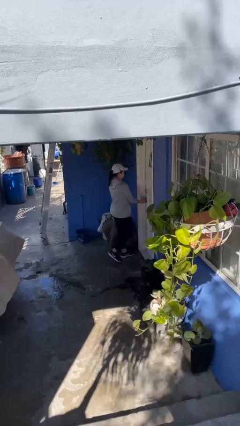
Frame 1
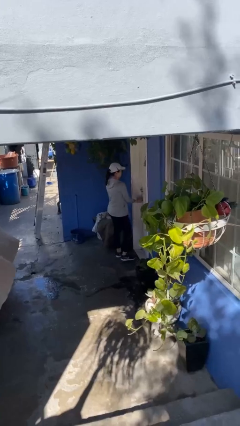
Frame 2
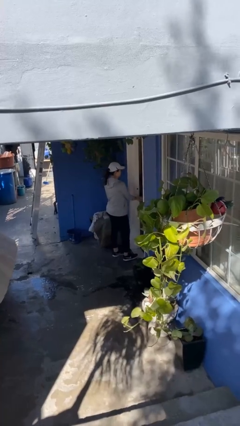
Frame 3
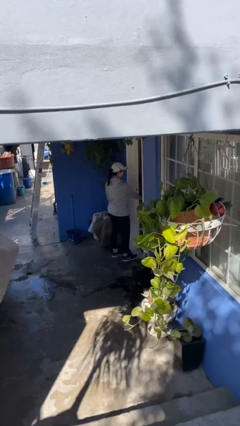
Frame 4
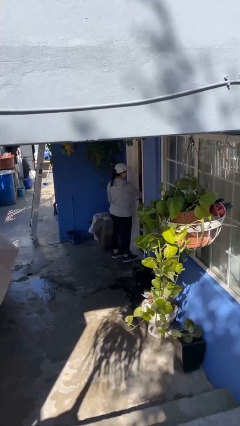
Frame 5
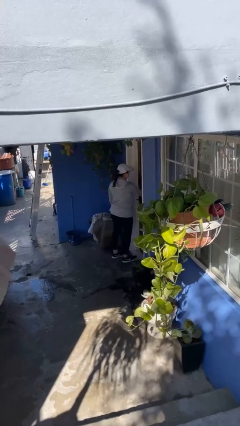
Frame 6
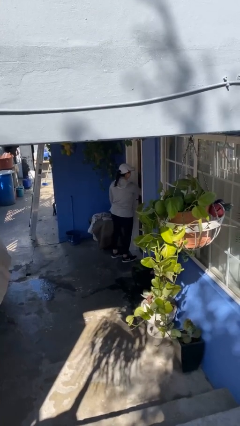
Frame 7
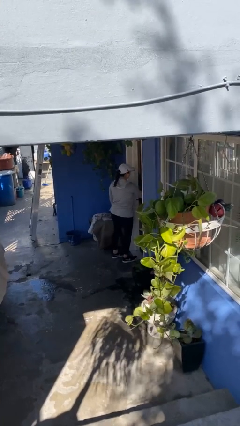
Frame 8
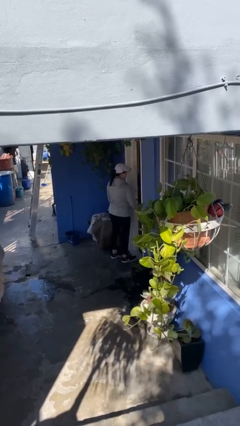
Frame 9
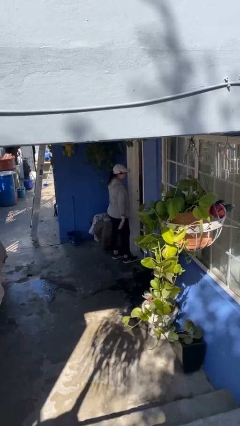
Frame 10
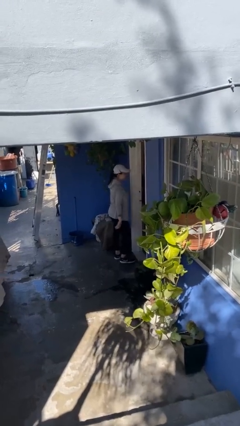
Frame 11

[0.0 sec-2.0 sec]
person opens facility door

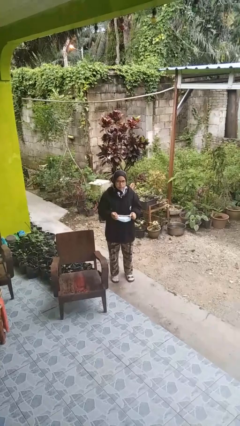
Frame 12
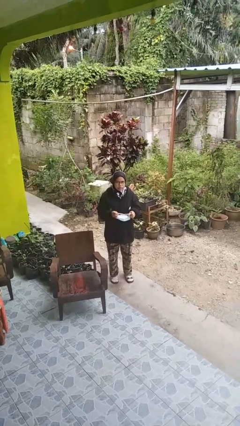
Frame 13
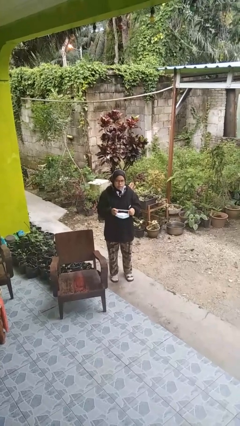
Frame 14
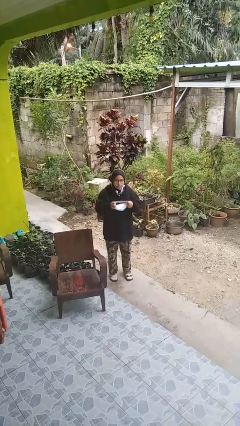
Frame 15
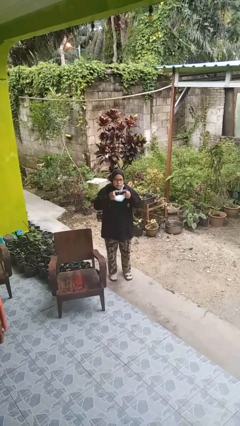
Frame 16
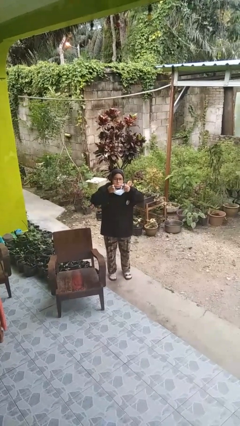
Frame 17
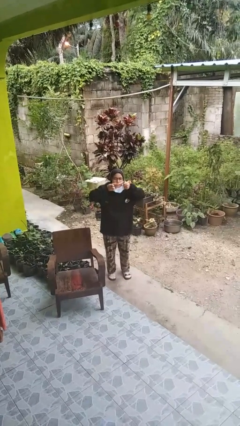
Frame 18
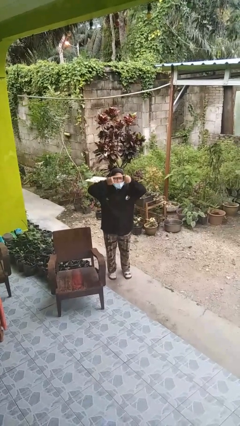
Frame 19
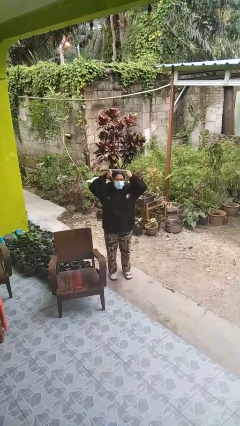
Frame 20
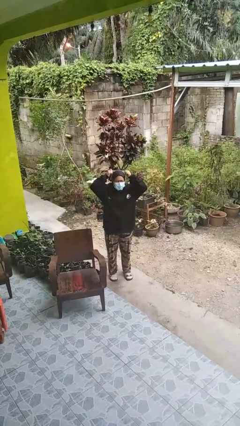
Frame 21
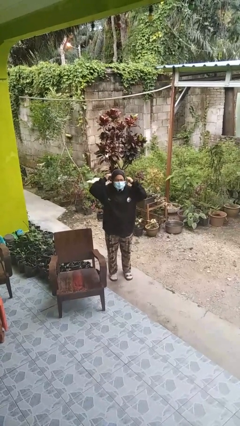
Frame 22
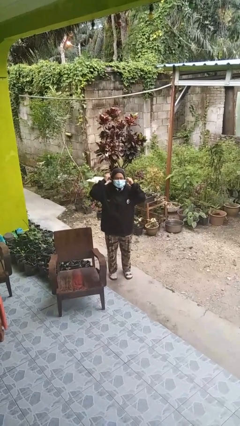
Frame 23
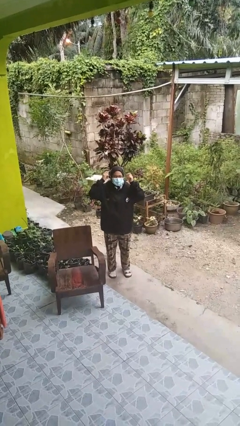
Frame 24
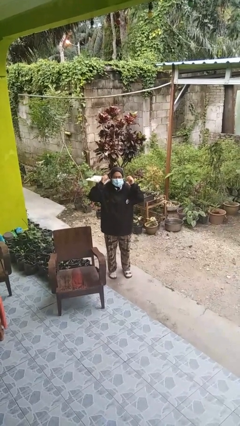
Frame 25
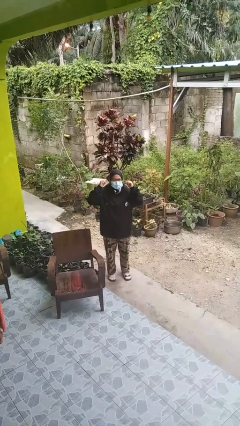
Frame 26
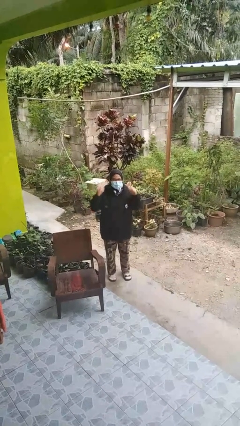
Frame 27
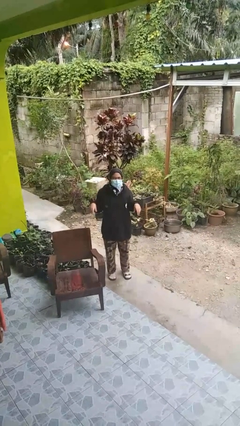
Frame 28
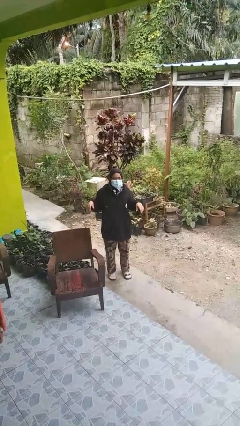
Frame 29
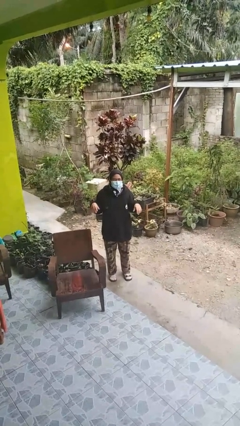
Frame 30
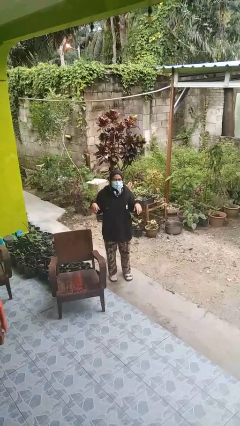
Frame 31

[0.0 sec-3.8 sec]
person puts on facemask

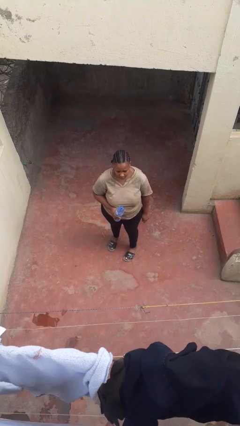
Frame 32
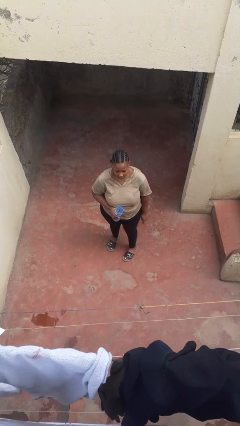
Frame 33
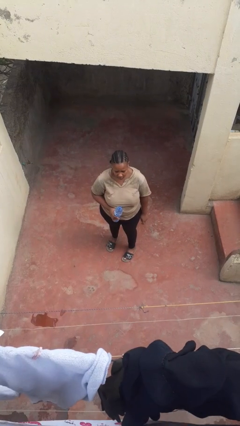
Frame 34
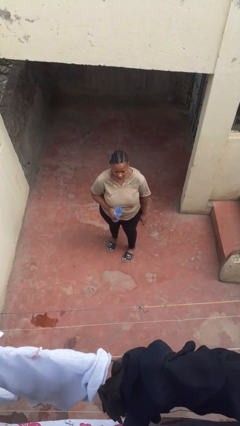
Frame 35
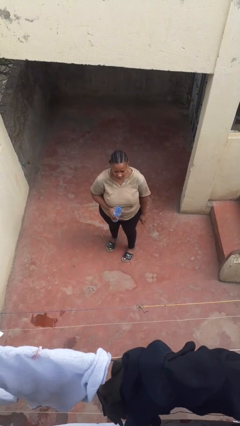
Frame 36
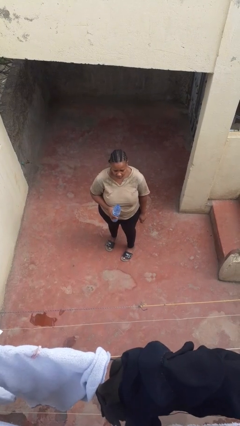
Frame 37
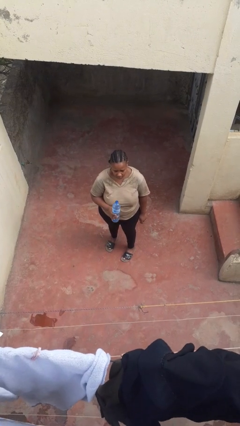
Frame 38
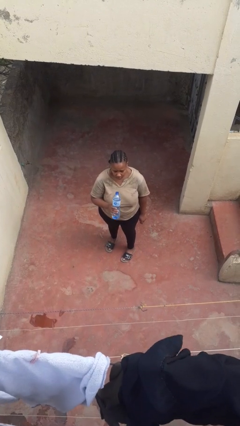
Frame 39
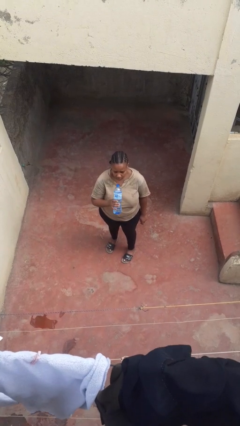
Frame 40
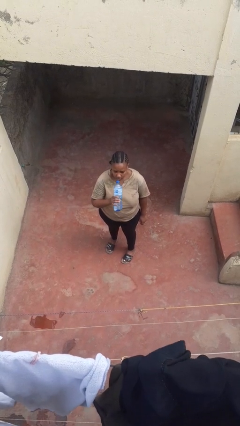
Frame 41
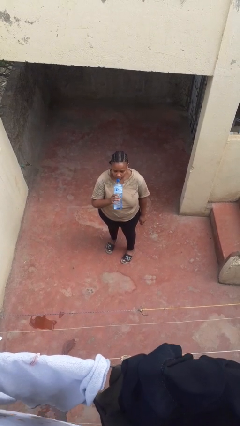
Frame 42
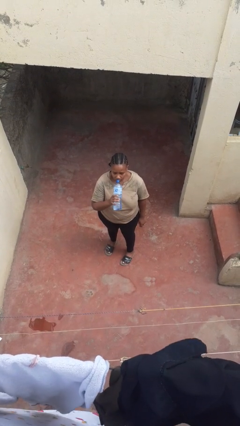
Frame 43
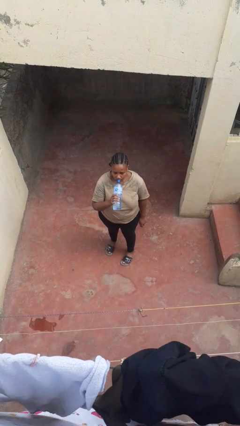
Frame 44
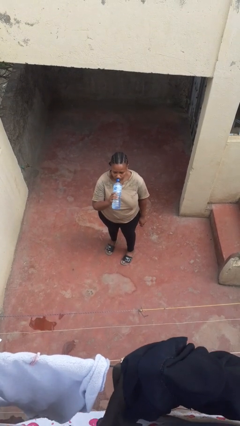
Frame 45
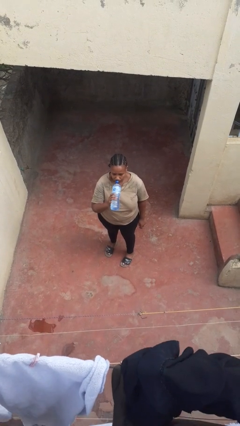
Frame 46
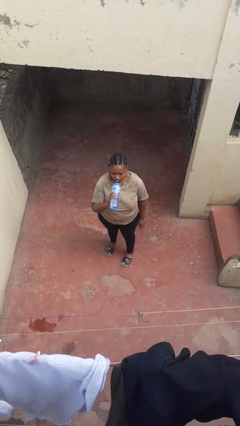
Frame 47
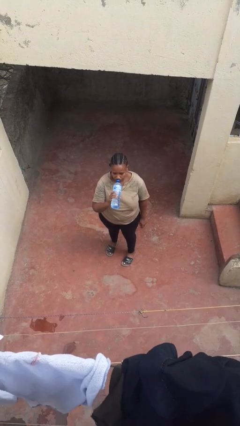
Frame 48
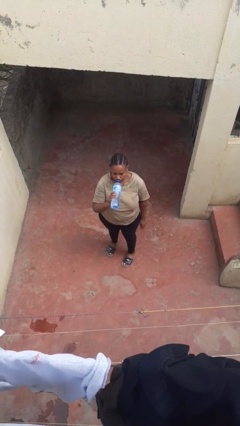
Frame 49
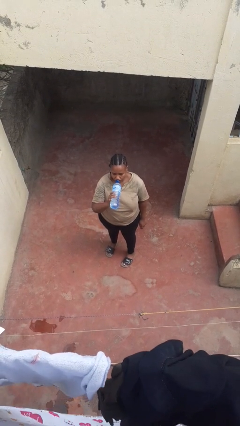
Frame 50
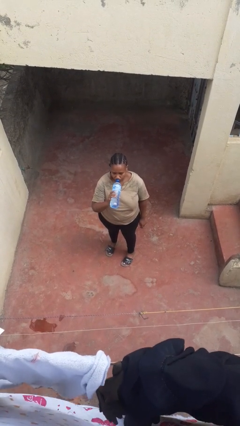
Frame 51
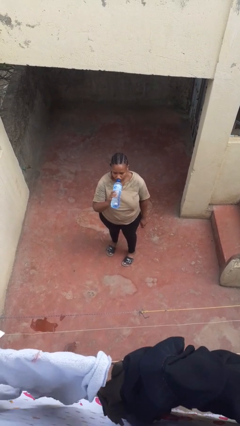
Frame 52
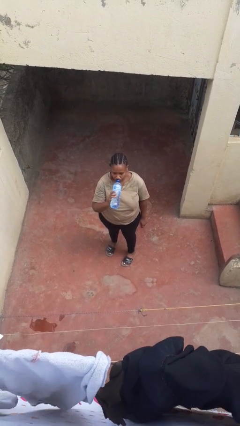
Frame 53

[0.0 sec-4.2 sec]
person drinks from bottle

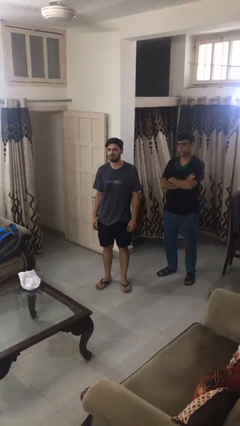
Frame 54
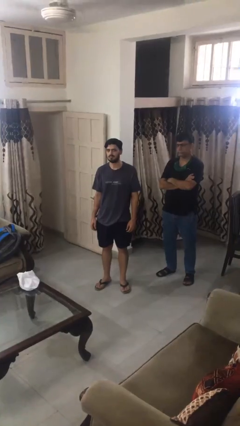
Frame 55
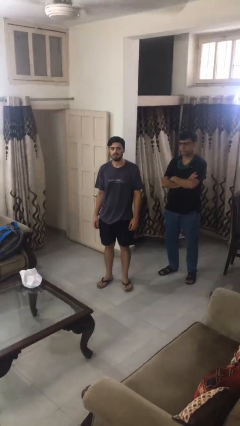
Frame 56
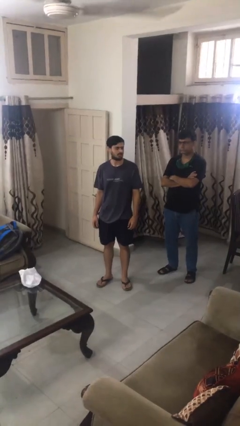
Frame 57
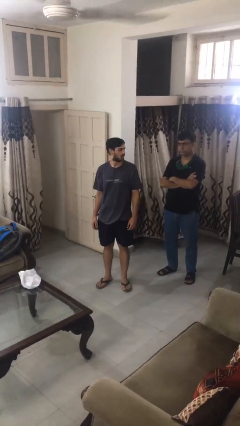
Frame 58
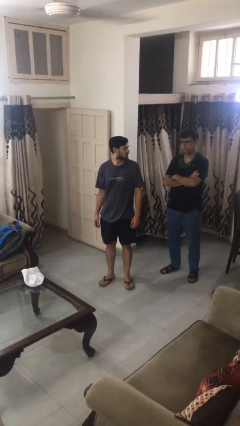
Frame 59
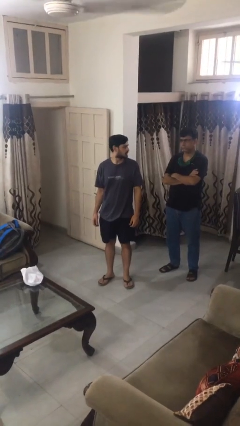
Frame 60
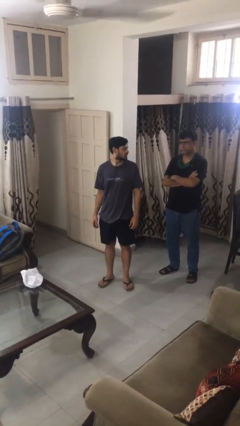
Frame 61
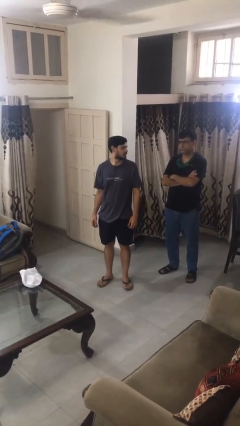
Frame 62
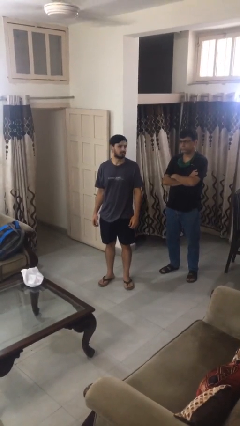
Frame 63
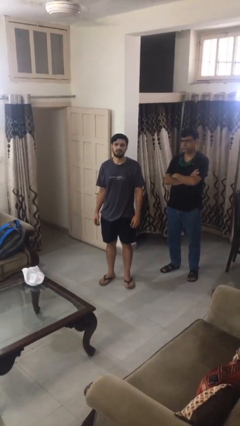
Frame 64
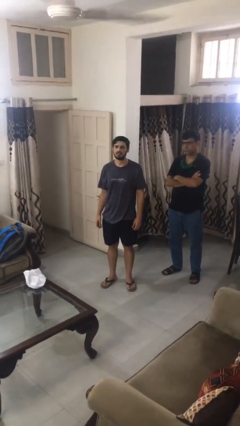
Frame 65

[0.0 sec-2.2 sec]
person looks over shoulder

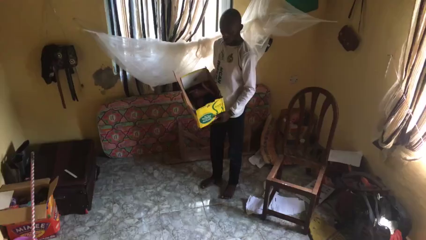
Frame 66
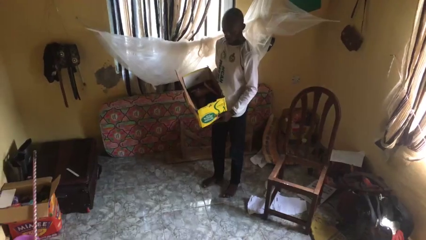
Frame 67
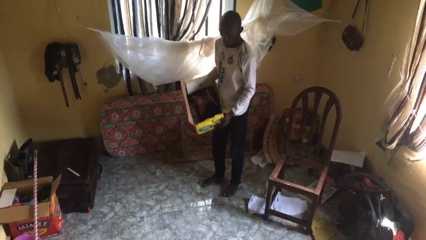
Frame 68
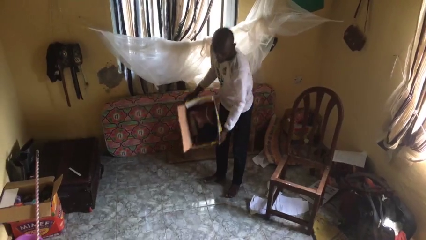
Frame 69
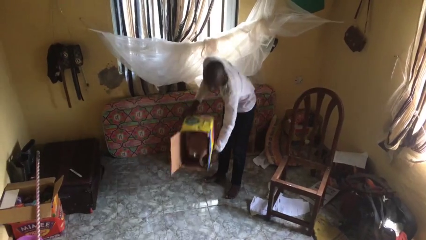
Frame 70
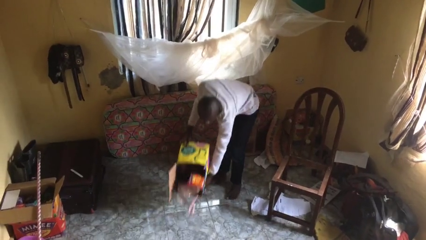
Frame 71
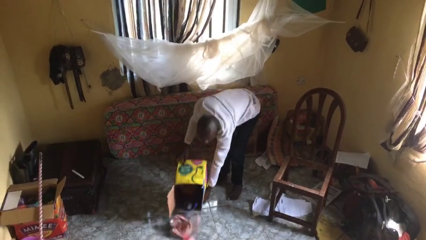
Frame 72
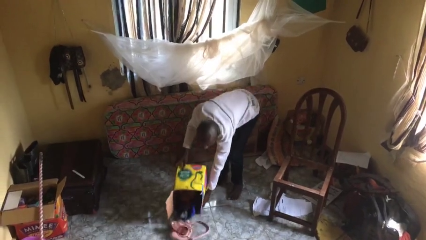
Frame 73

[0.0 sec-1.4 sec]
person unloads box onto floor

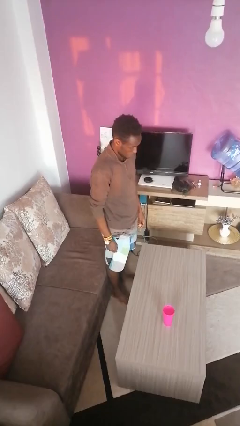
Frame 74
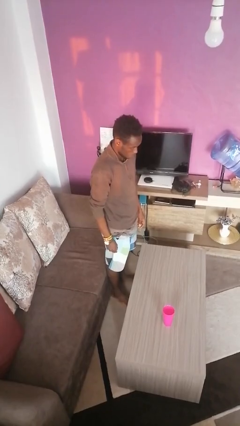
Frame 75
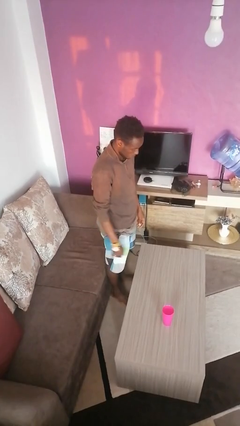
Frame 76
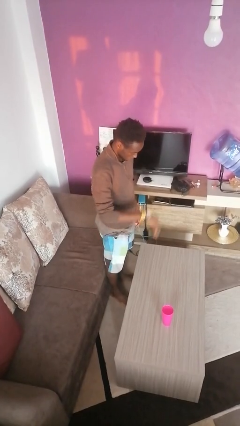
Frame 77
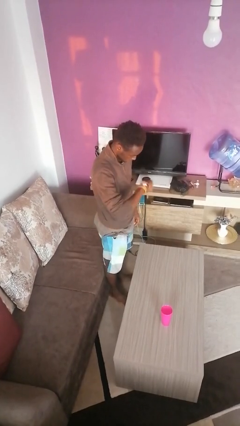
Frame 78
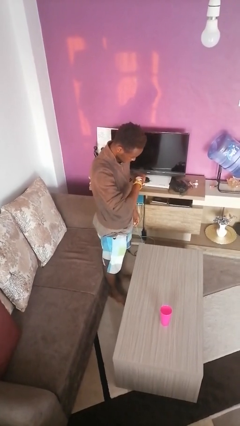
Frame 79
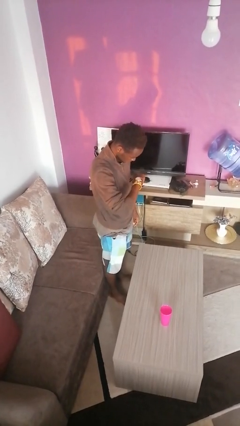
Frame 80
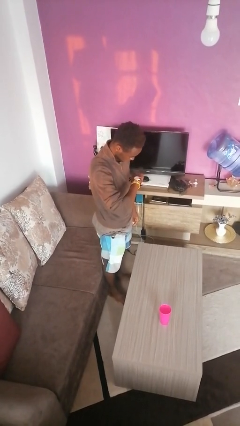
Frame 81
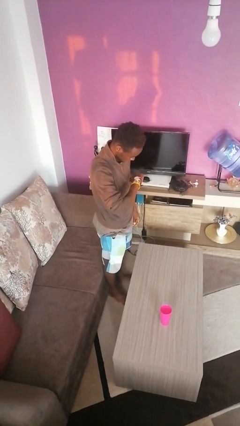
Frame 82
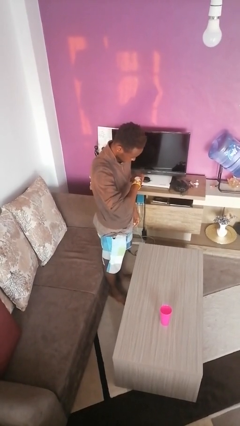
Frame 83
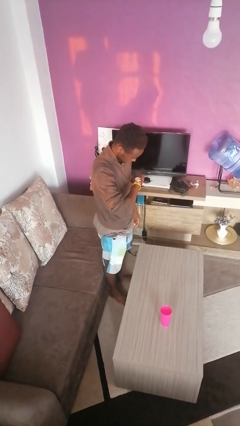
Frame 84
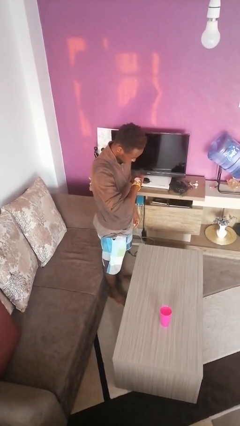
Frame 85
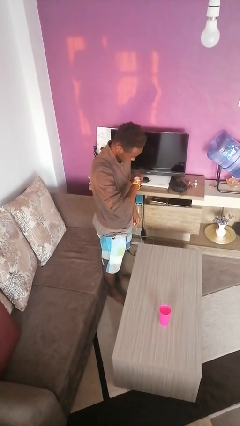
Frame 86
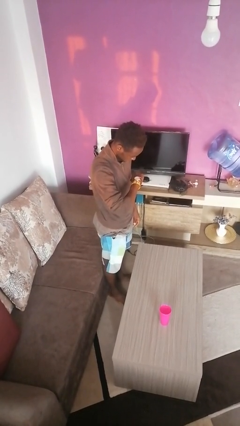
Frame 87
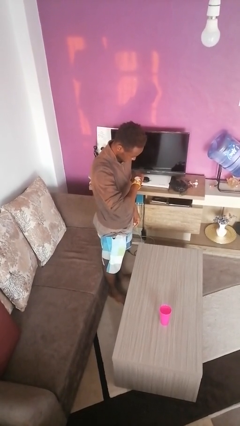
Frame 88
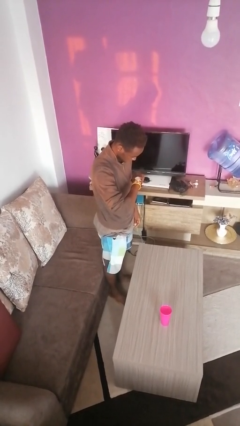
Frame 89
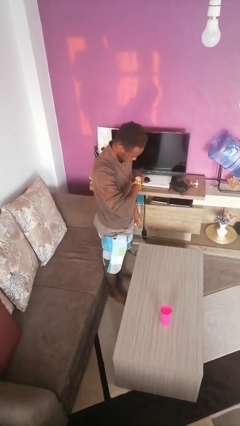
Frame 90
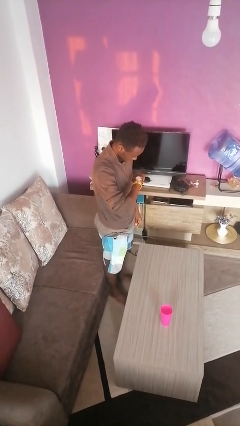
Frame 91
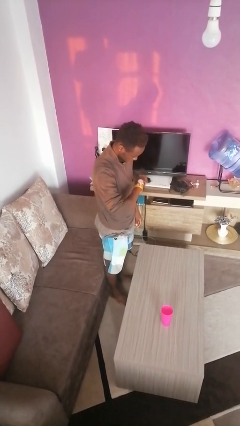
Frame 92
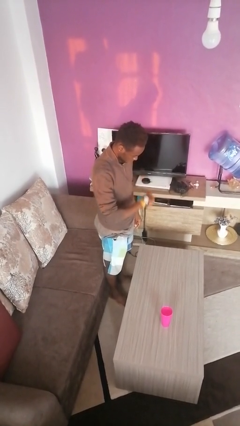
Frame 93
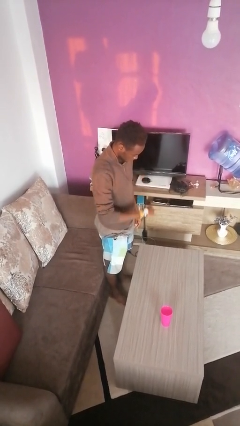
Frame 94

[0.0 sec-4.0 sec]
person looks at wristwatch
